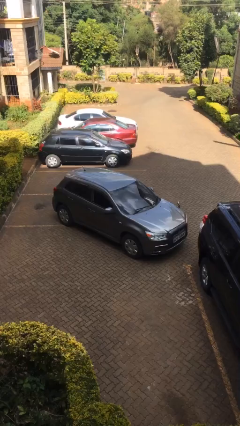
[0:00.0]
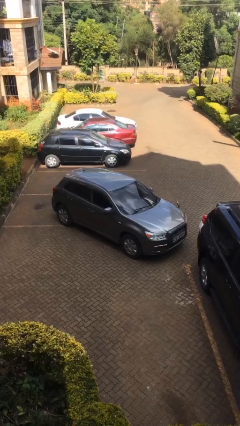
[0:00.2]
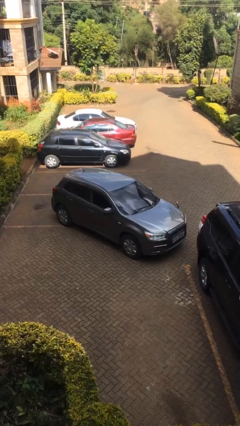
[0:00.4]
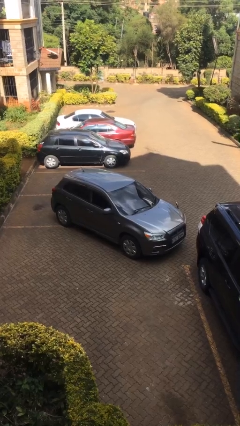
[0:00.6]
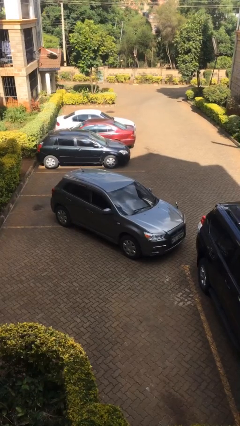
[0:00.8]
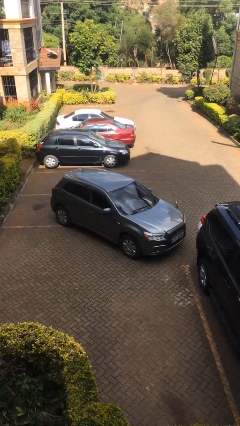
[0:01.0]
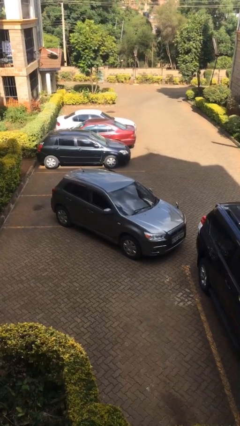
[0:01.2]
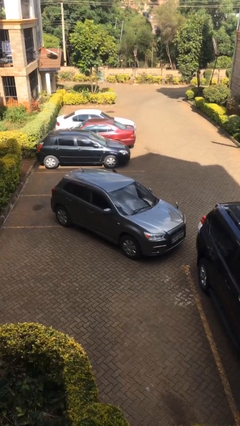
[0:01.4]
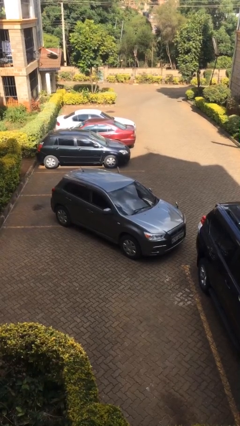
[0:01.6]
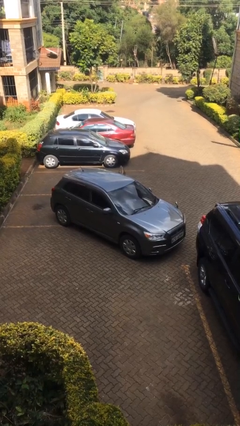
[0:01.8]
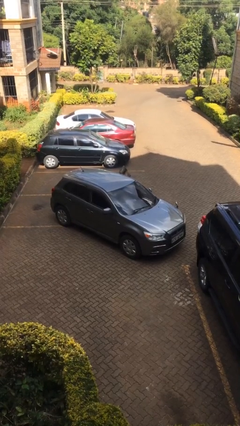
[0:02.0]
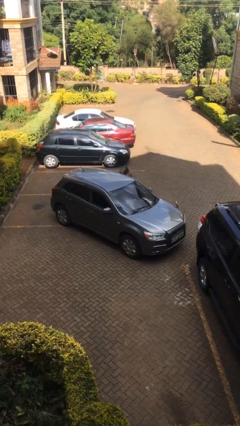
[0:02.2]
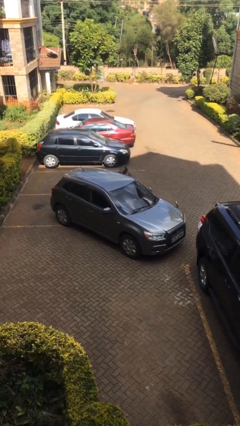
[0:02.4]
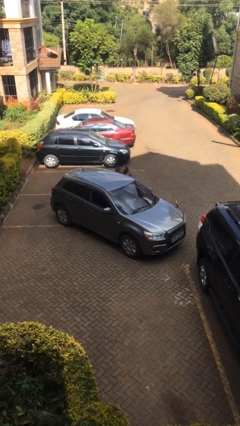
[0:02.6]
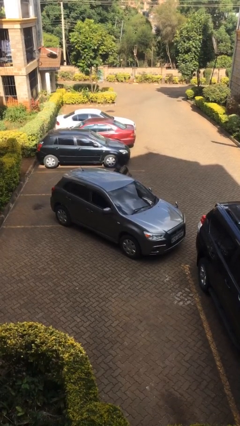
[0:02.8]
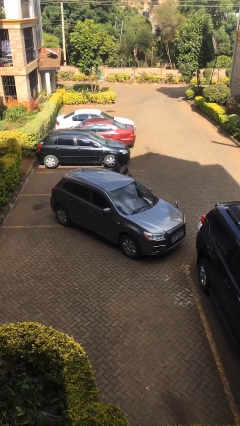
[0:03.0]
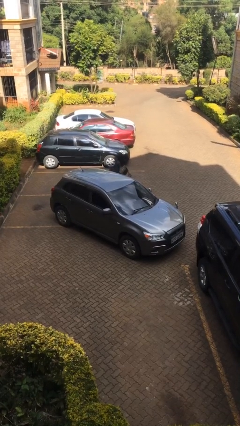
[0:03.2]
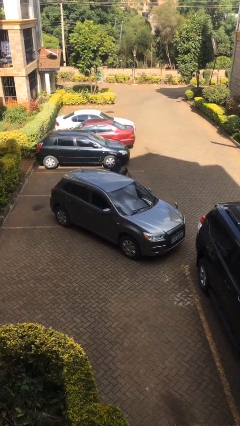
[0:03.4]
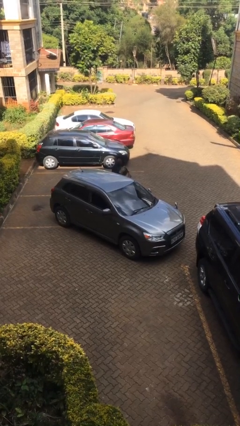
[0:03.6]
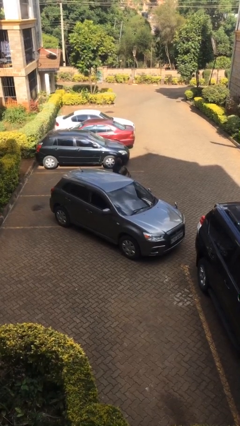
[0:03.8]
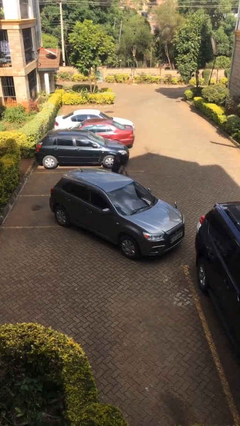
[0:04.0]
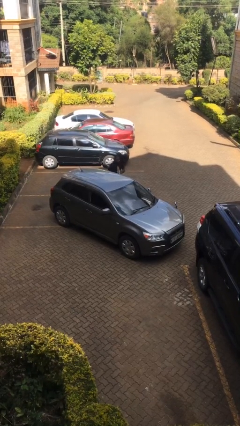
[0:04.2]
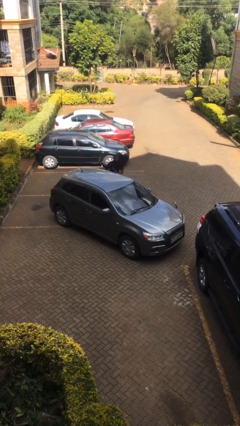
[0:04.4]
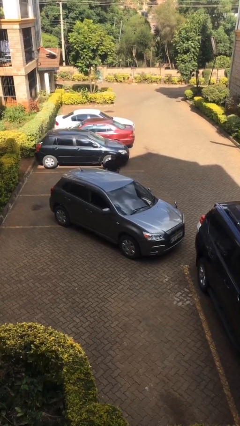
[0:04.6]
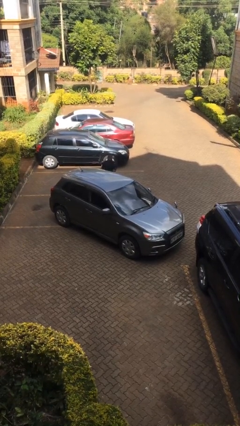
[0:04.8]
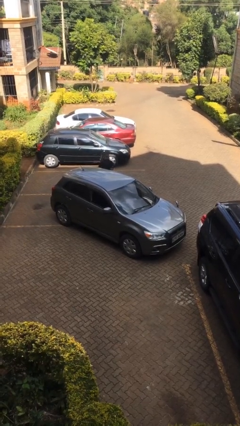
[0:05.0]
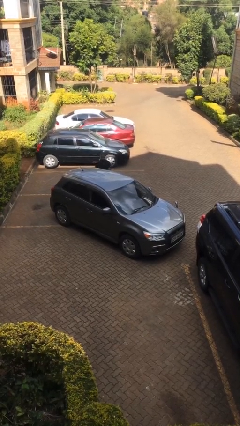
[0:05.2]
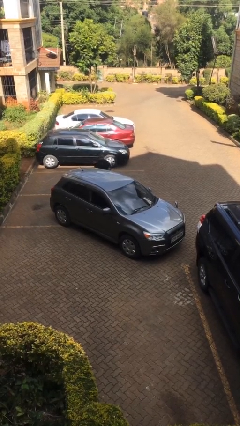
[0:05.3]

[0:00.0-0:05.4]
car drops off person

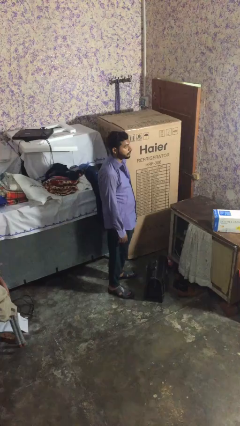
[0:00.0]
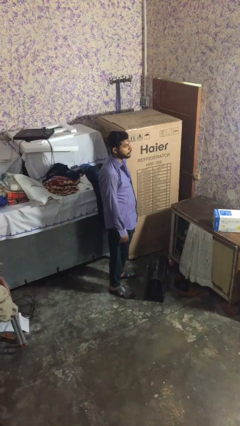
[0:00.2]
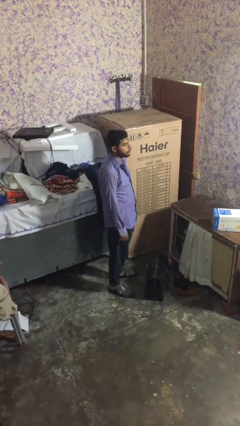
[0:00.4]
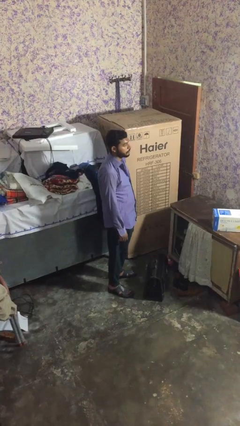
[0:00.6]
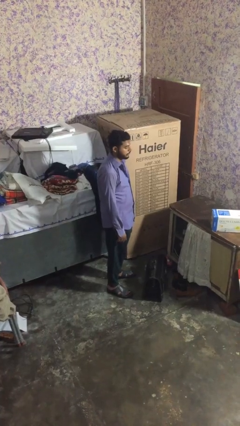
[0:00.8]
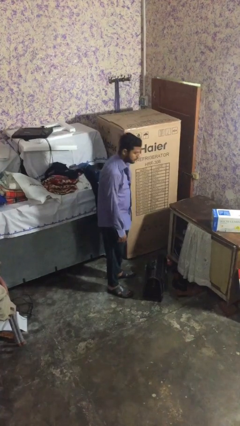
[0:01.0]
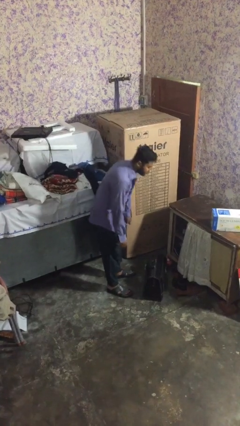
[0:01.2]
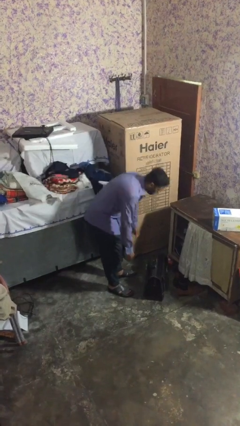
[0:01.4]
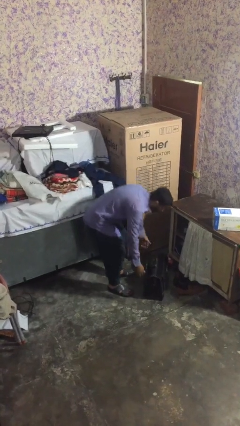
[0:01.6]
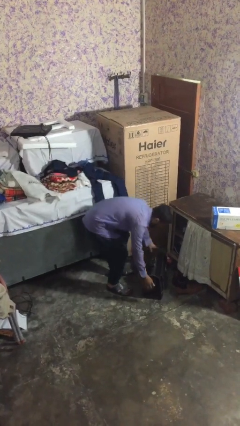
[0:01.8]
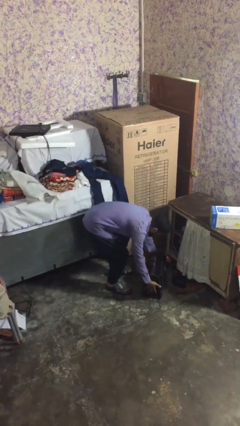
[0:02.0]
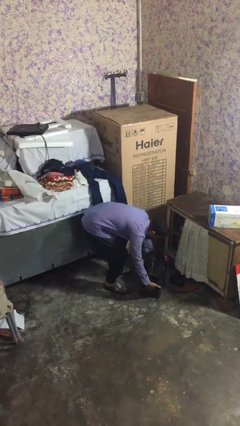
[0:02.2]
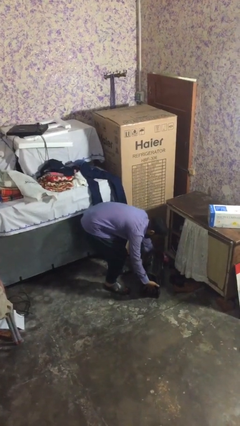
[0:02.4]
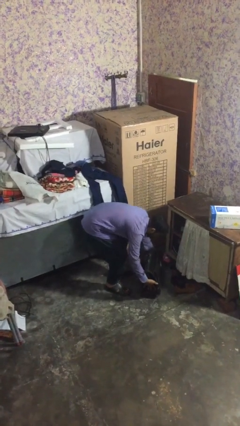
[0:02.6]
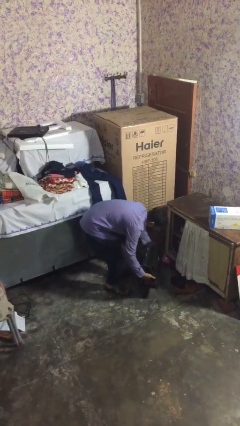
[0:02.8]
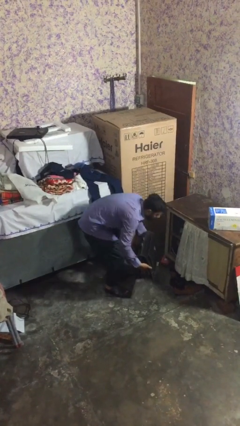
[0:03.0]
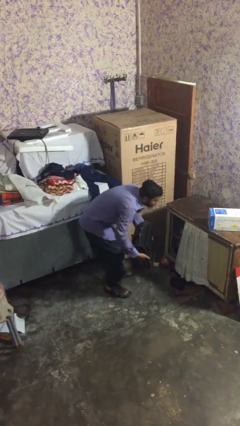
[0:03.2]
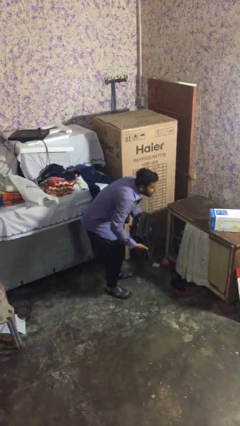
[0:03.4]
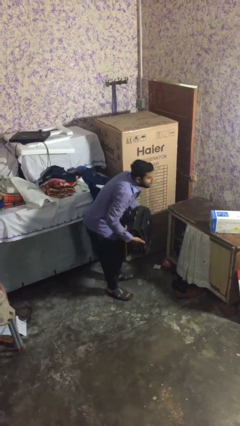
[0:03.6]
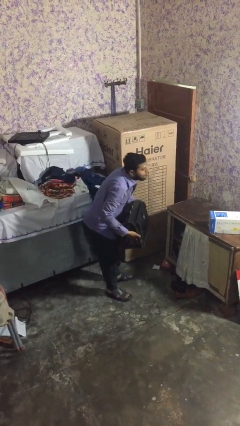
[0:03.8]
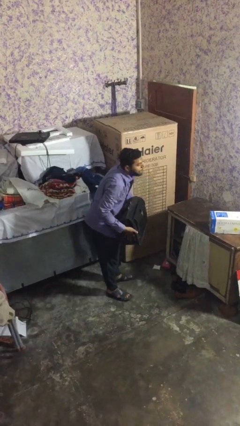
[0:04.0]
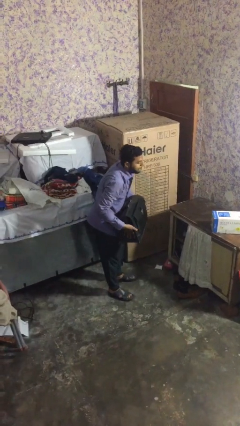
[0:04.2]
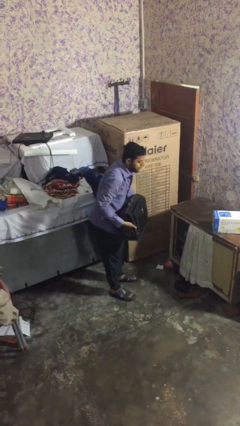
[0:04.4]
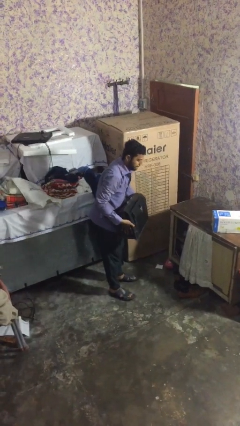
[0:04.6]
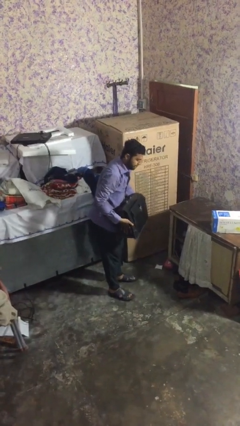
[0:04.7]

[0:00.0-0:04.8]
person picks up object from floor

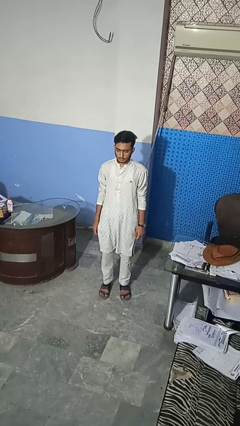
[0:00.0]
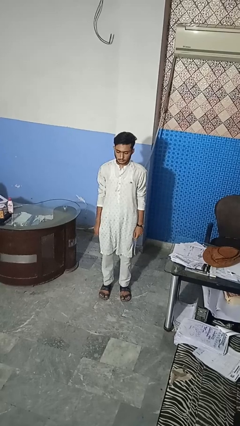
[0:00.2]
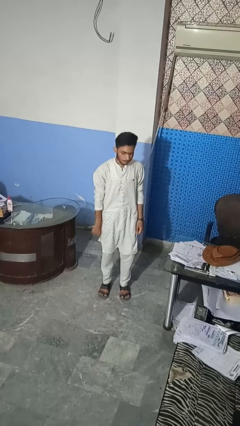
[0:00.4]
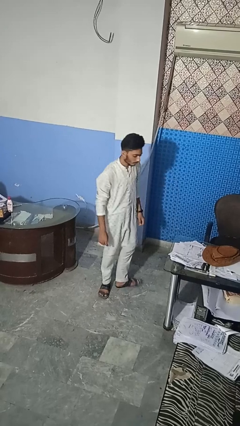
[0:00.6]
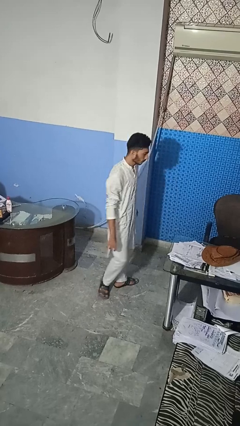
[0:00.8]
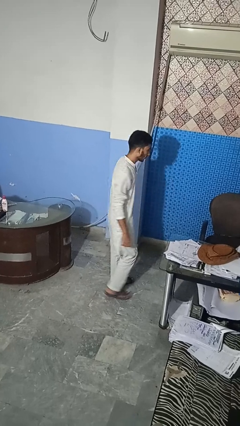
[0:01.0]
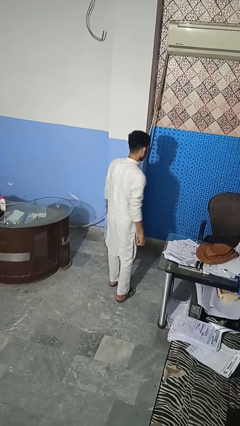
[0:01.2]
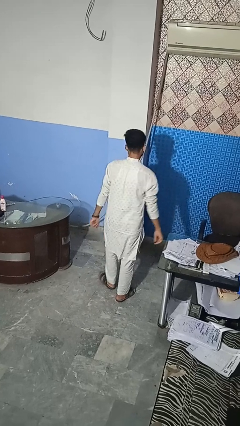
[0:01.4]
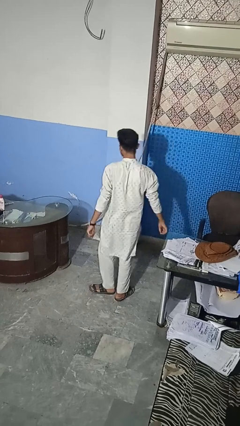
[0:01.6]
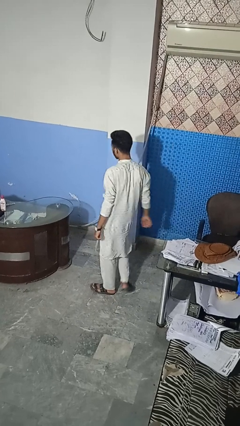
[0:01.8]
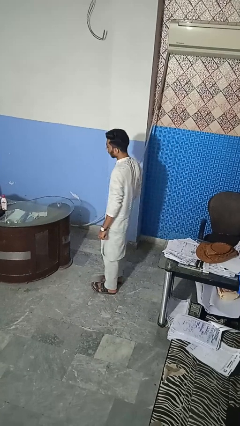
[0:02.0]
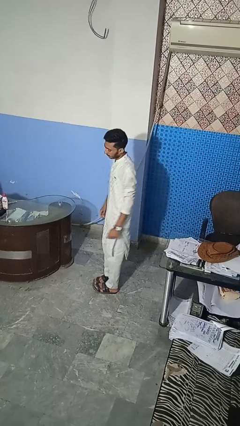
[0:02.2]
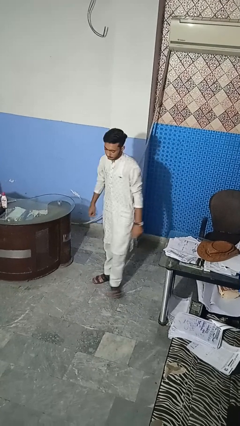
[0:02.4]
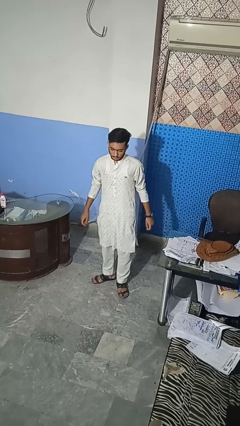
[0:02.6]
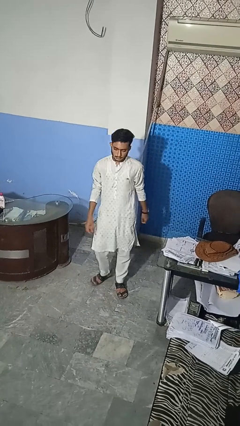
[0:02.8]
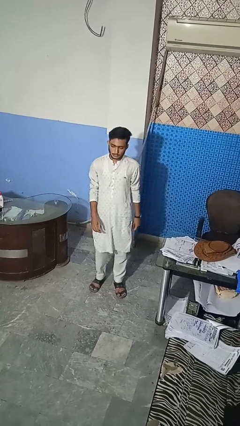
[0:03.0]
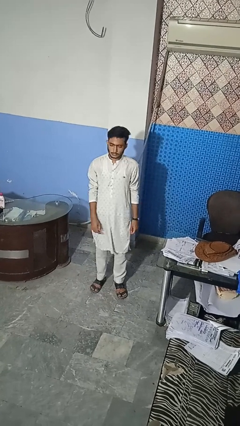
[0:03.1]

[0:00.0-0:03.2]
person twirls

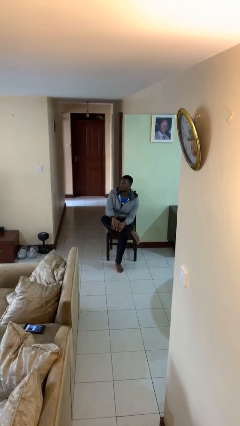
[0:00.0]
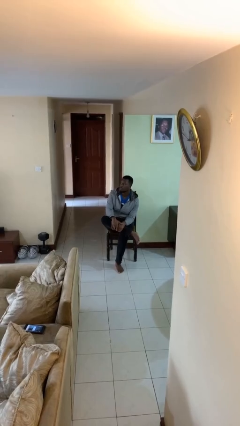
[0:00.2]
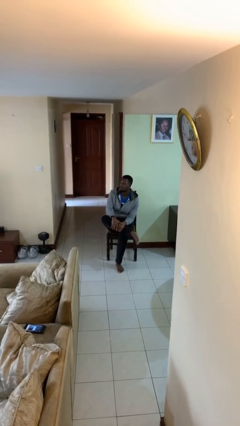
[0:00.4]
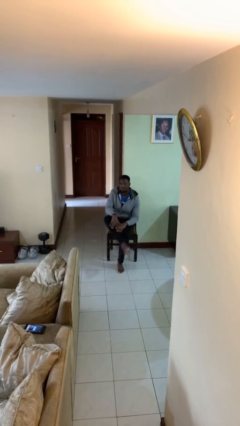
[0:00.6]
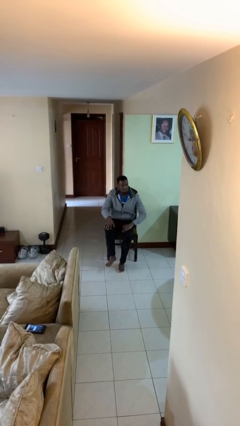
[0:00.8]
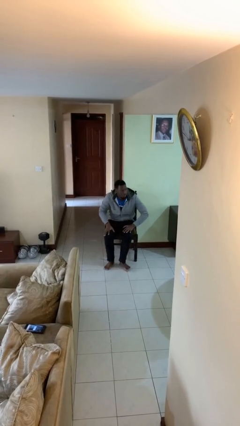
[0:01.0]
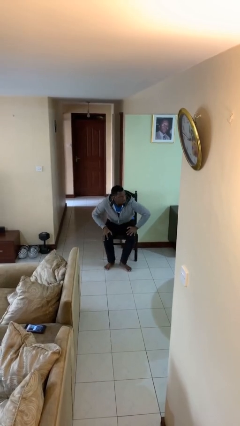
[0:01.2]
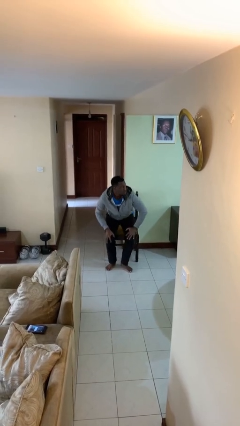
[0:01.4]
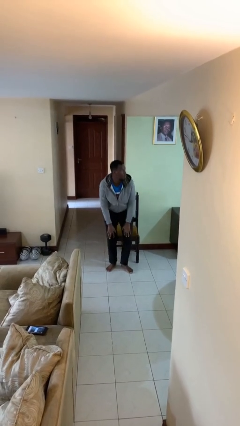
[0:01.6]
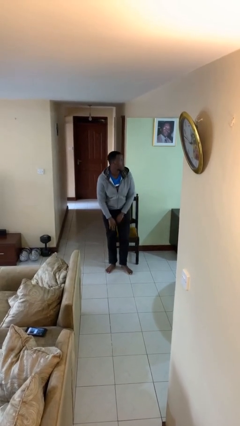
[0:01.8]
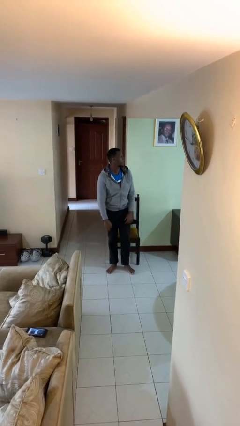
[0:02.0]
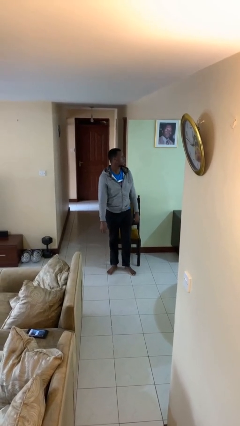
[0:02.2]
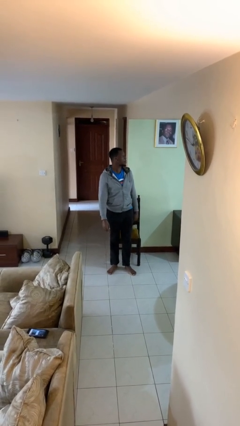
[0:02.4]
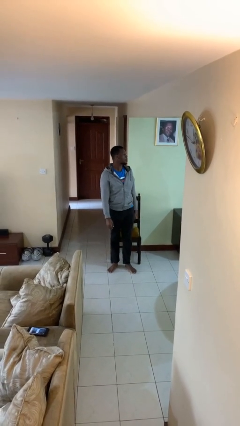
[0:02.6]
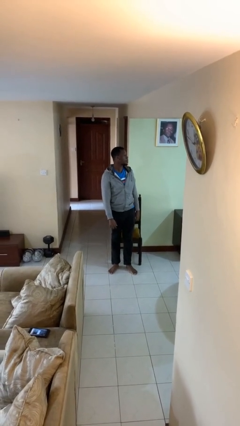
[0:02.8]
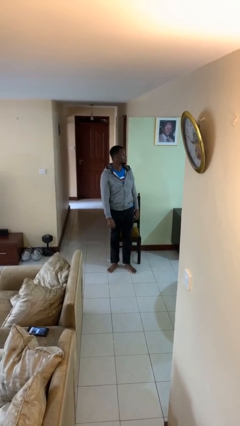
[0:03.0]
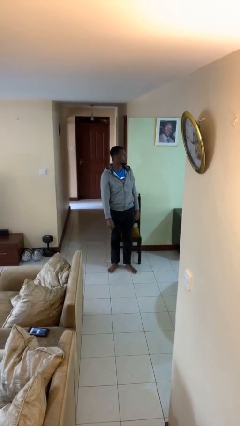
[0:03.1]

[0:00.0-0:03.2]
person stands up

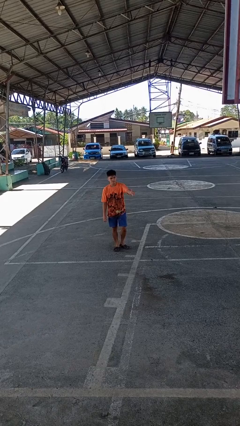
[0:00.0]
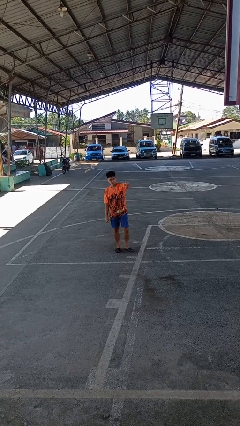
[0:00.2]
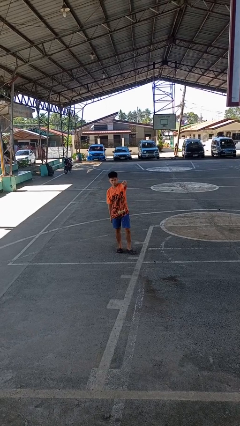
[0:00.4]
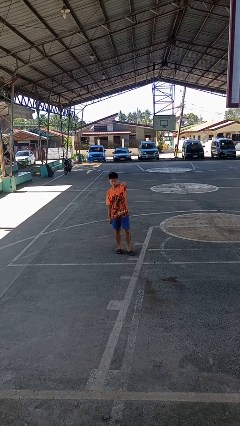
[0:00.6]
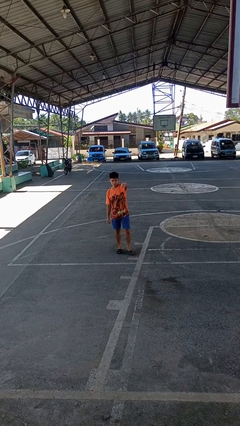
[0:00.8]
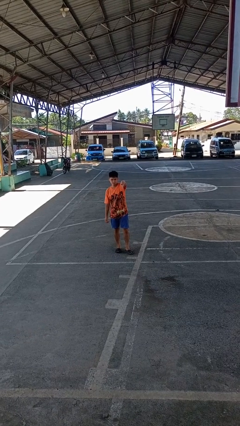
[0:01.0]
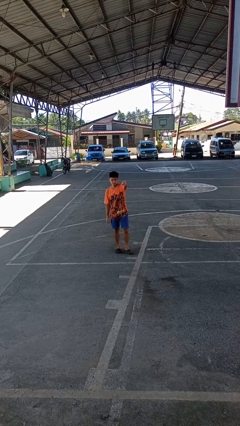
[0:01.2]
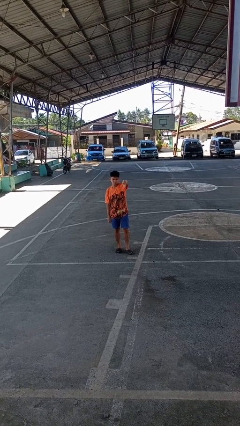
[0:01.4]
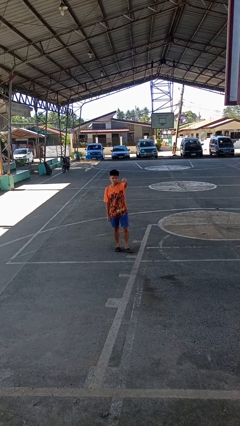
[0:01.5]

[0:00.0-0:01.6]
person gestures thumbs down
